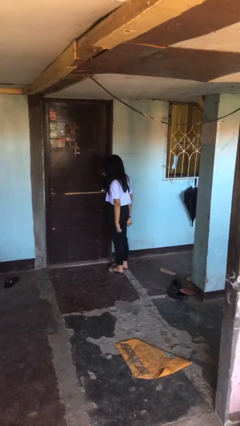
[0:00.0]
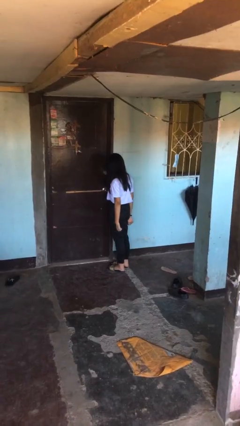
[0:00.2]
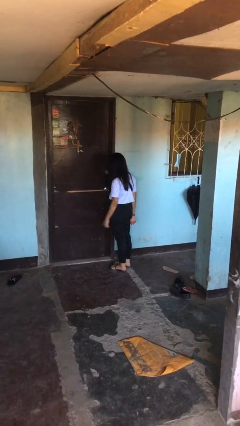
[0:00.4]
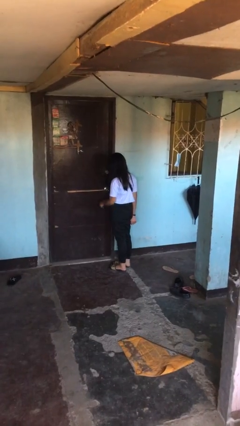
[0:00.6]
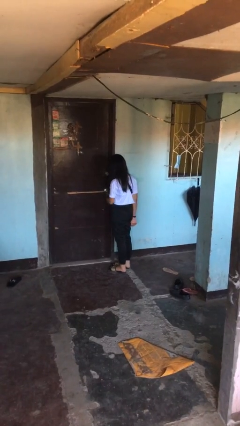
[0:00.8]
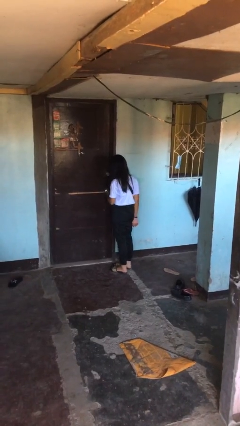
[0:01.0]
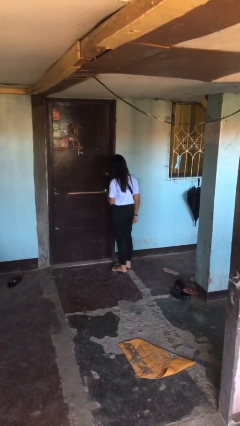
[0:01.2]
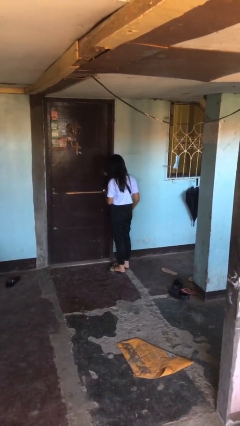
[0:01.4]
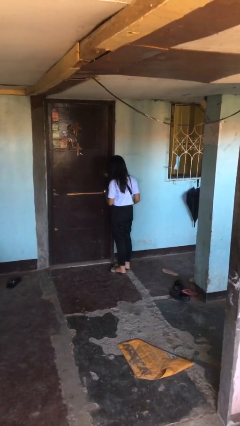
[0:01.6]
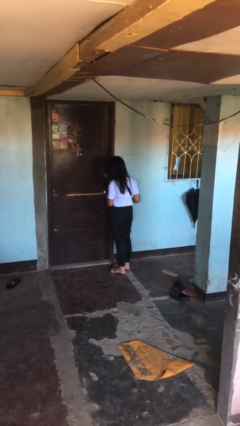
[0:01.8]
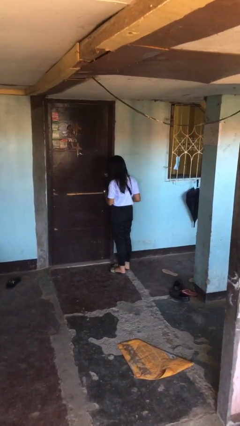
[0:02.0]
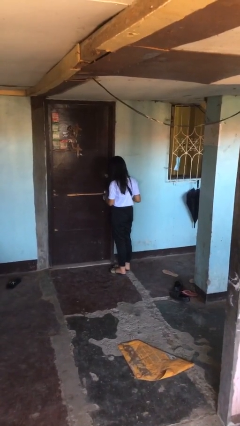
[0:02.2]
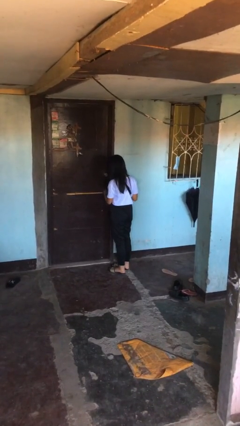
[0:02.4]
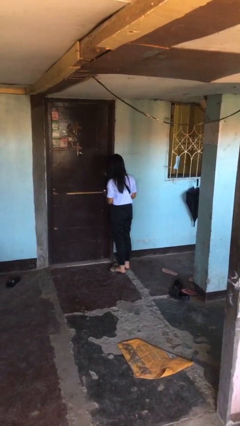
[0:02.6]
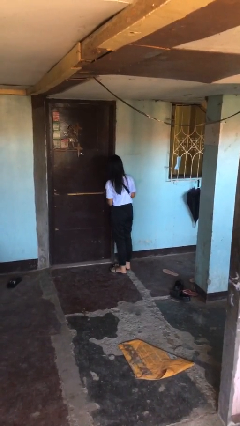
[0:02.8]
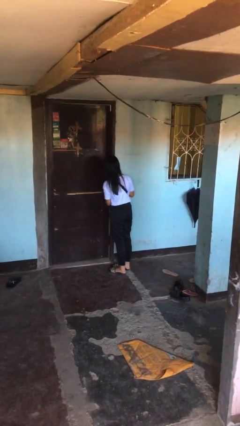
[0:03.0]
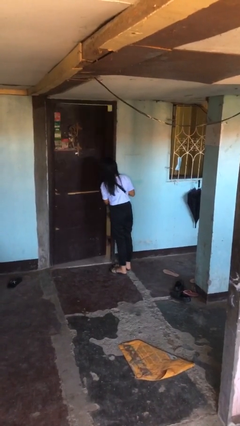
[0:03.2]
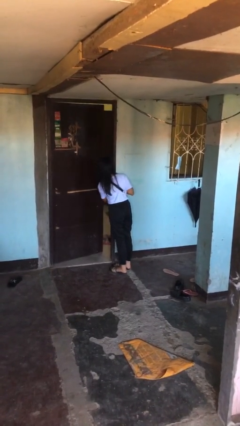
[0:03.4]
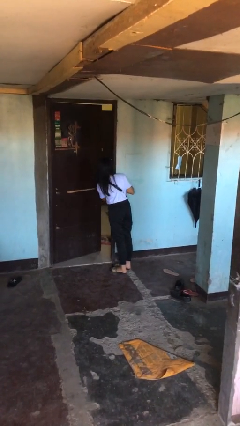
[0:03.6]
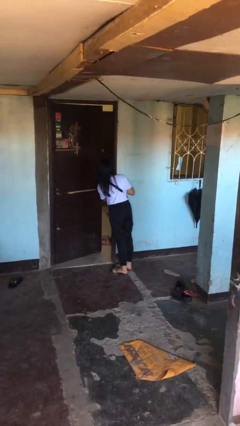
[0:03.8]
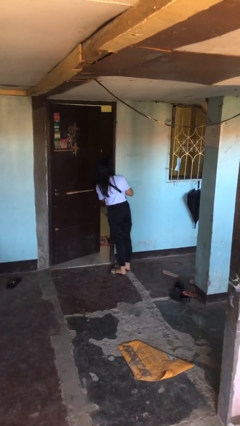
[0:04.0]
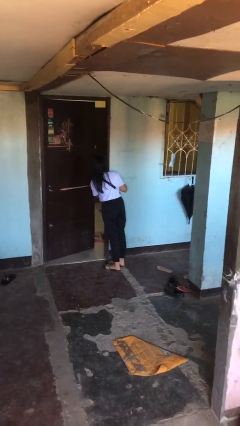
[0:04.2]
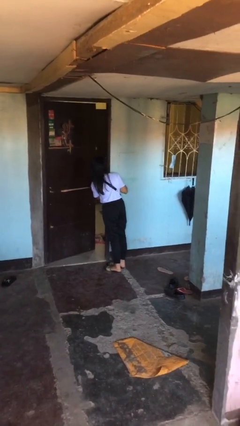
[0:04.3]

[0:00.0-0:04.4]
person unlocks door with keys

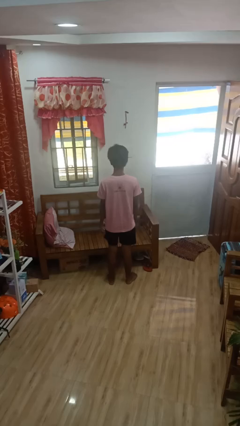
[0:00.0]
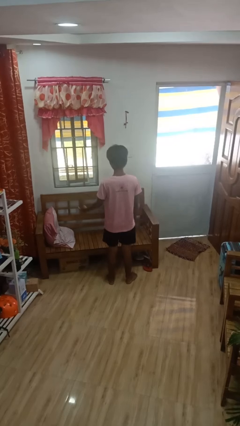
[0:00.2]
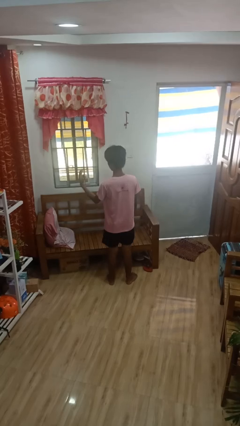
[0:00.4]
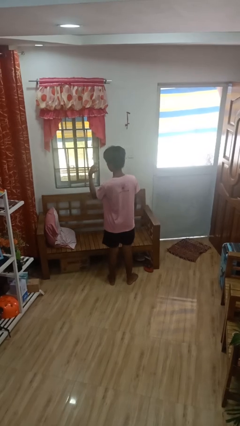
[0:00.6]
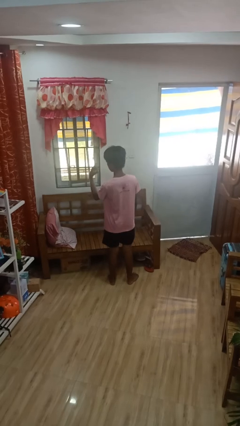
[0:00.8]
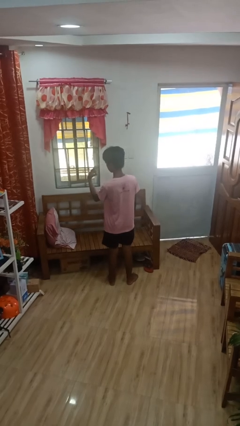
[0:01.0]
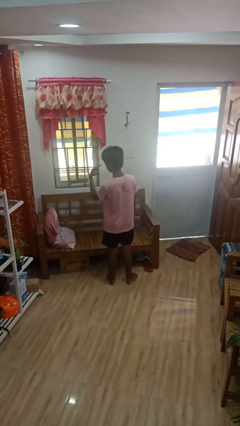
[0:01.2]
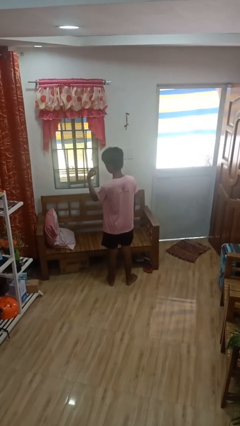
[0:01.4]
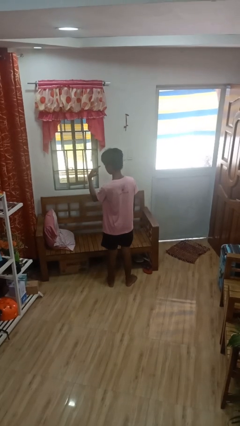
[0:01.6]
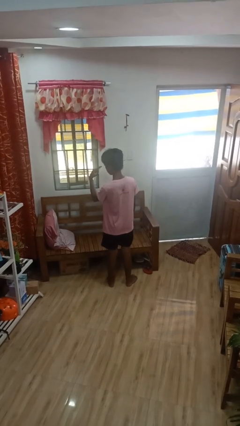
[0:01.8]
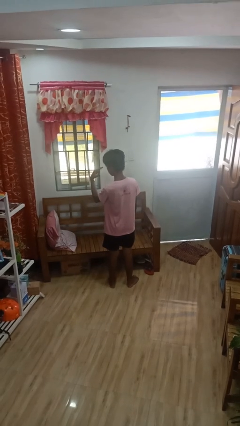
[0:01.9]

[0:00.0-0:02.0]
person gestures watch closely

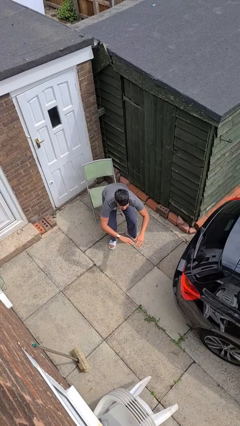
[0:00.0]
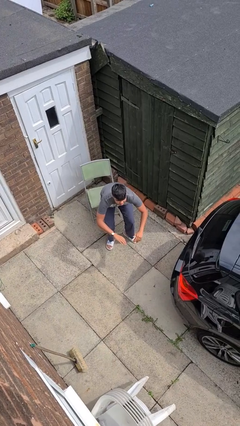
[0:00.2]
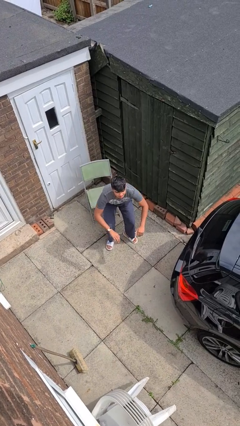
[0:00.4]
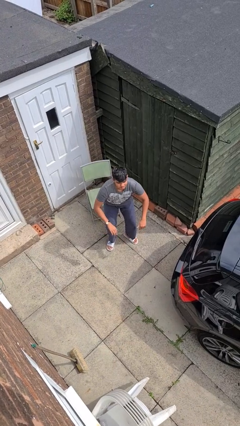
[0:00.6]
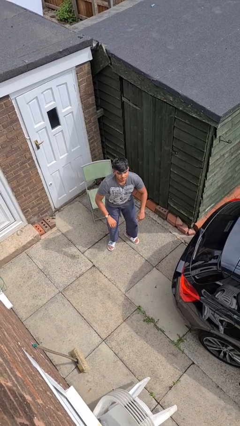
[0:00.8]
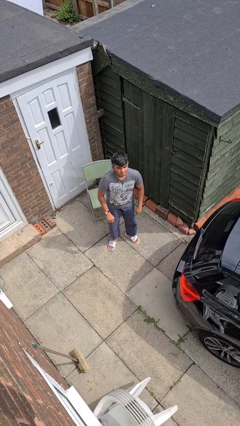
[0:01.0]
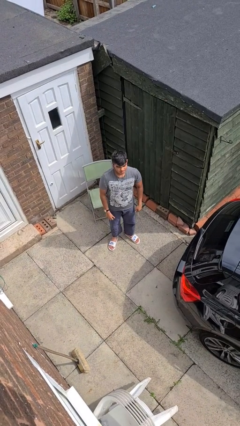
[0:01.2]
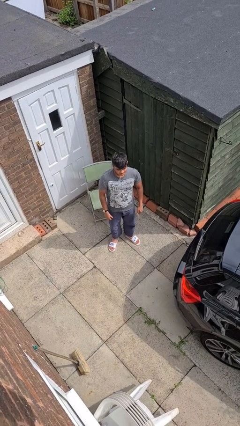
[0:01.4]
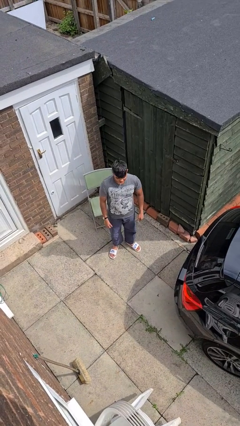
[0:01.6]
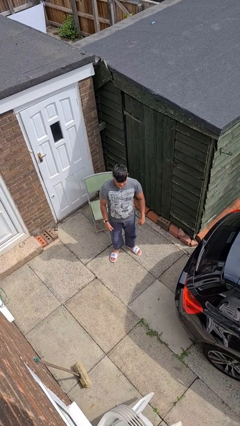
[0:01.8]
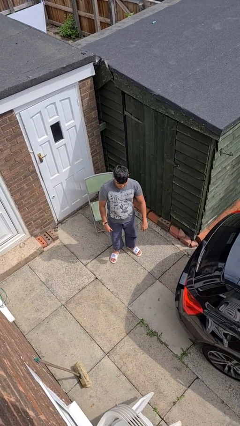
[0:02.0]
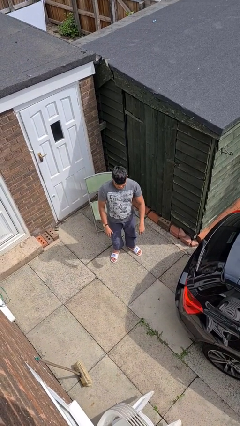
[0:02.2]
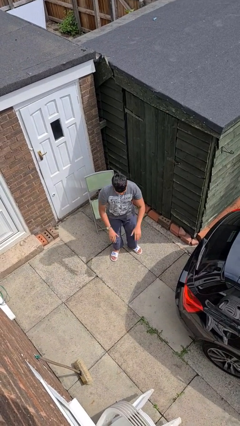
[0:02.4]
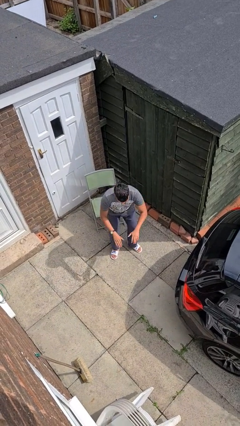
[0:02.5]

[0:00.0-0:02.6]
person stands up

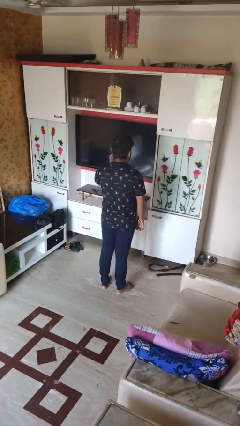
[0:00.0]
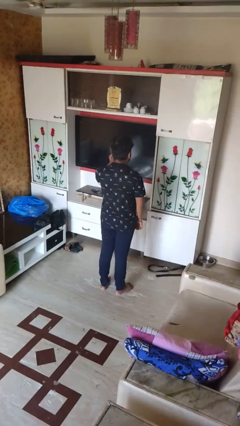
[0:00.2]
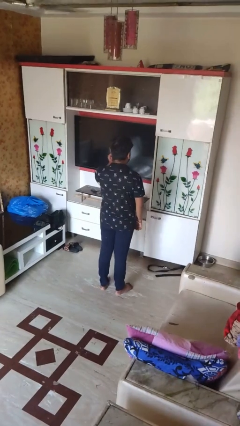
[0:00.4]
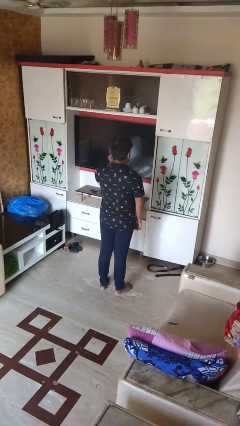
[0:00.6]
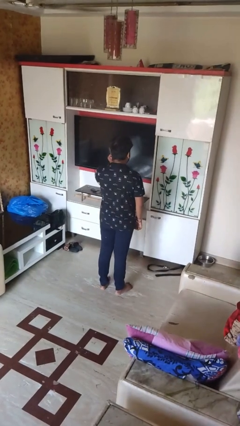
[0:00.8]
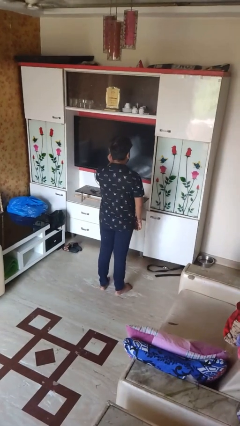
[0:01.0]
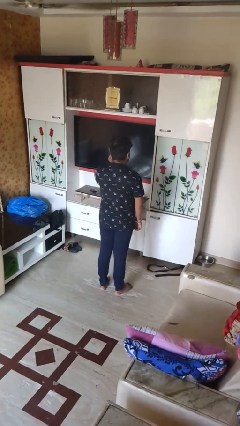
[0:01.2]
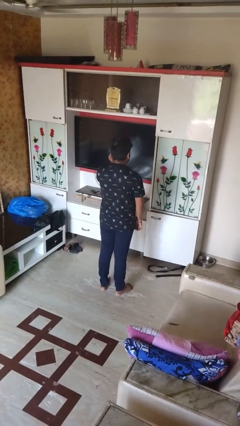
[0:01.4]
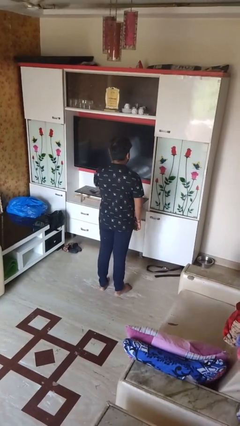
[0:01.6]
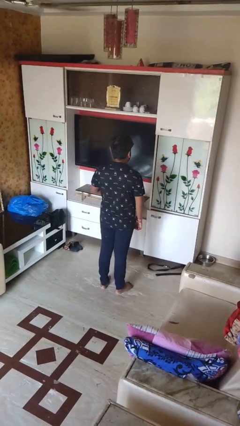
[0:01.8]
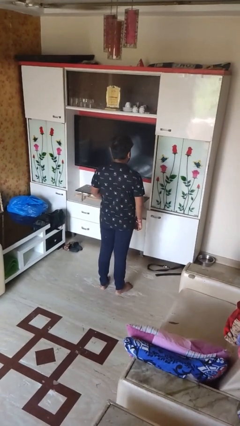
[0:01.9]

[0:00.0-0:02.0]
person touches earlobe

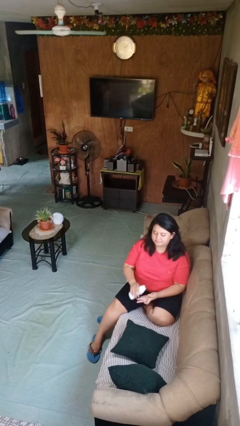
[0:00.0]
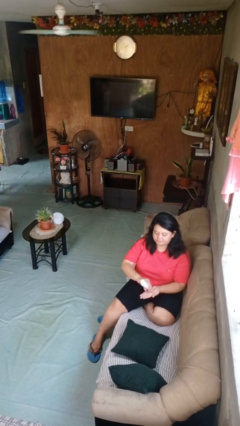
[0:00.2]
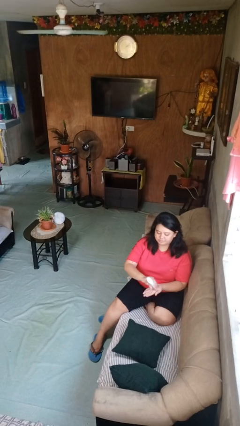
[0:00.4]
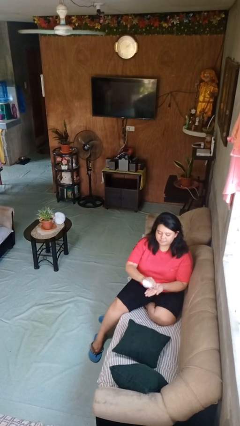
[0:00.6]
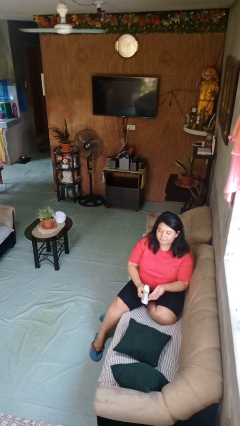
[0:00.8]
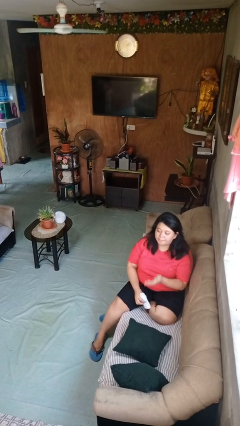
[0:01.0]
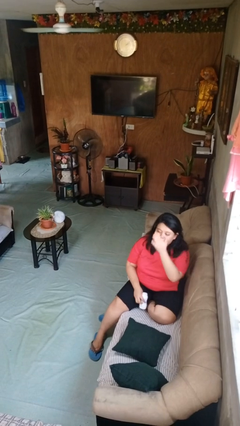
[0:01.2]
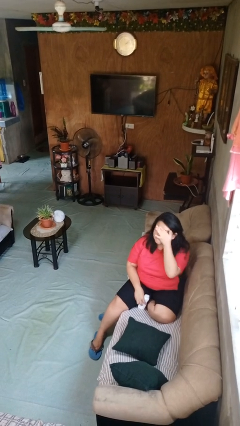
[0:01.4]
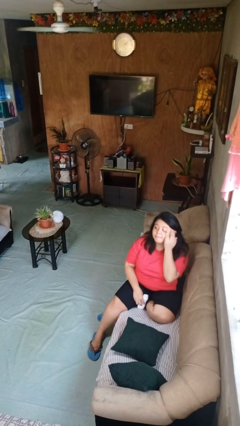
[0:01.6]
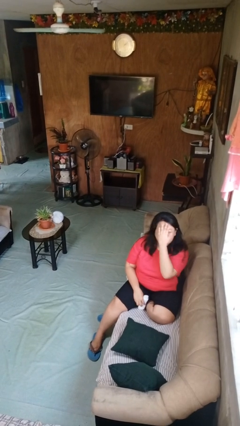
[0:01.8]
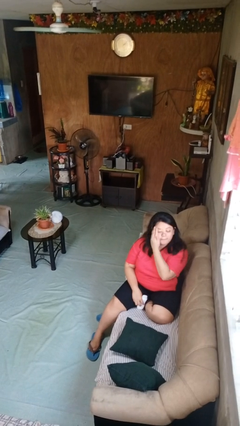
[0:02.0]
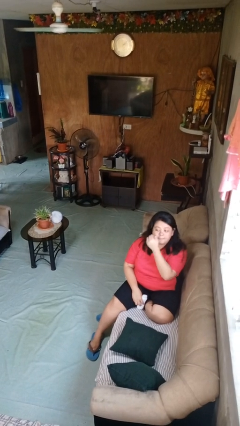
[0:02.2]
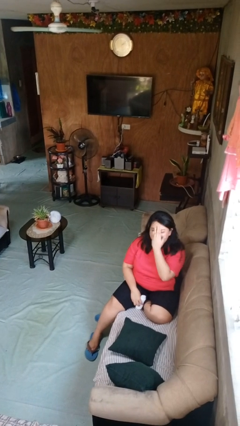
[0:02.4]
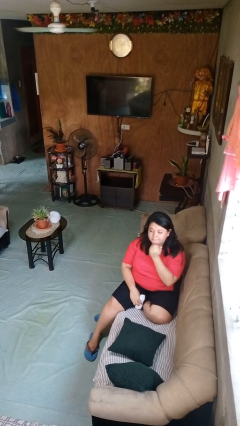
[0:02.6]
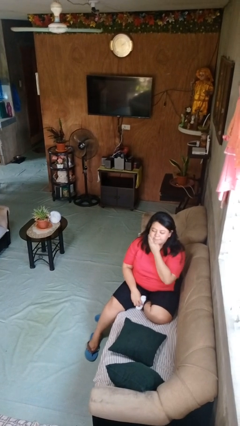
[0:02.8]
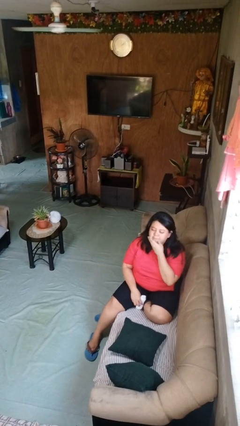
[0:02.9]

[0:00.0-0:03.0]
person applies facial moisturizer

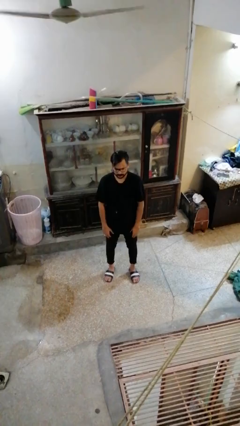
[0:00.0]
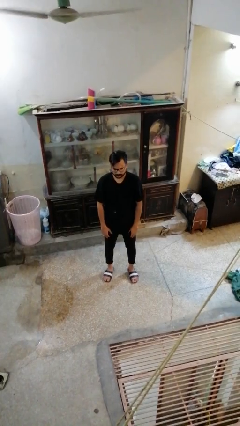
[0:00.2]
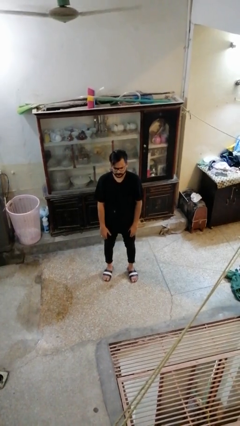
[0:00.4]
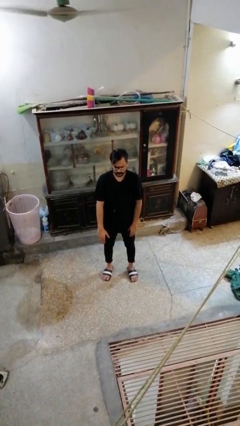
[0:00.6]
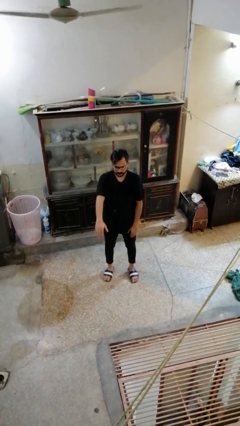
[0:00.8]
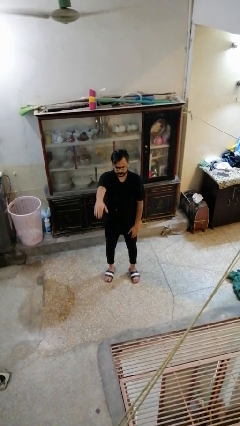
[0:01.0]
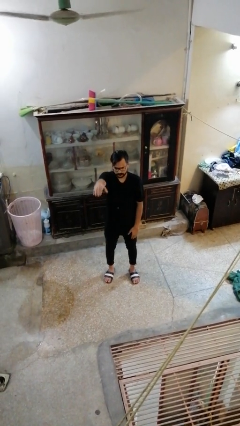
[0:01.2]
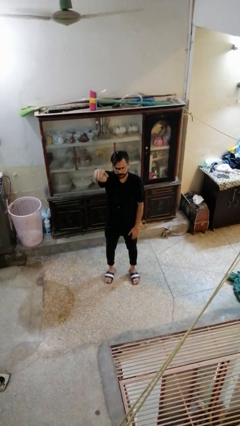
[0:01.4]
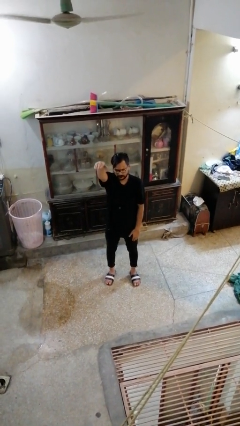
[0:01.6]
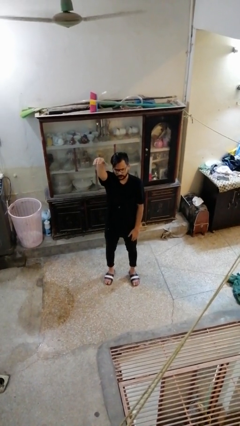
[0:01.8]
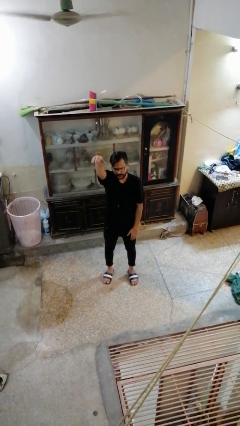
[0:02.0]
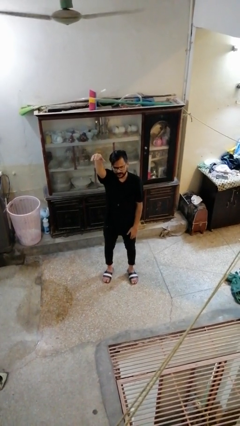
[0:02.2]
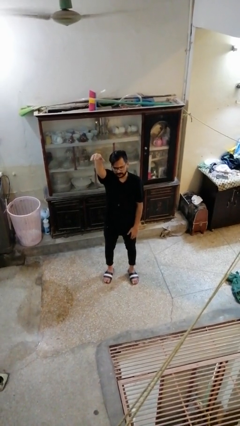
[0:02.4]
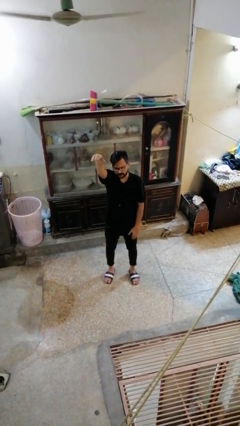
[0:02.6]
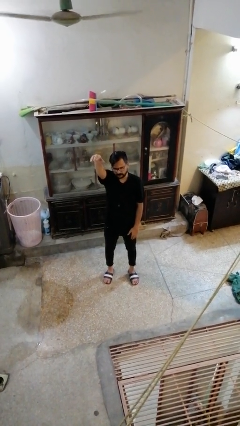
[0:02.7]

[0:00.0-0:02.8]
person gestures swipe up

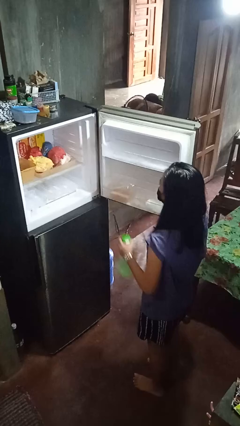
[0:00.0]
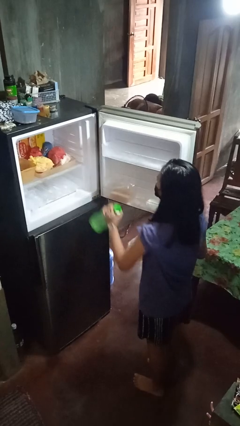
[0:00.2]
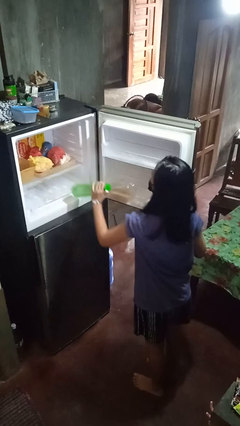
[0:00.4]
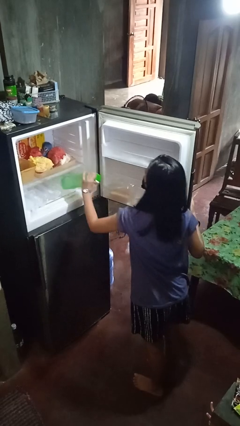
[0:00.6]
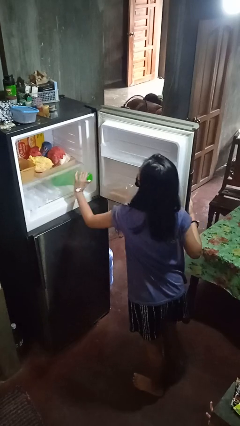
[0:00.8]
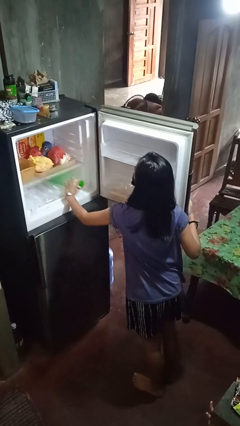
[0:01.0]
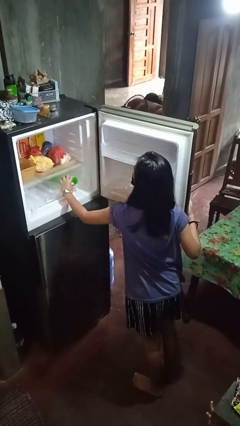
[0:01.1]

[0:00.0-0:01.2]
person puts object into refrigerator
